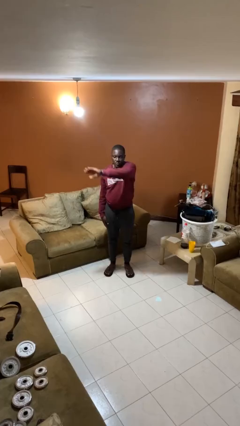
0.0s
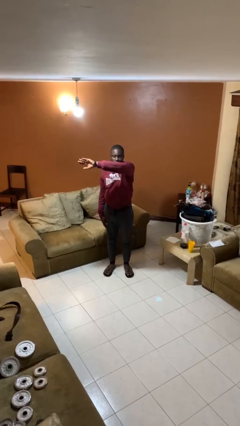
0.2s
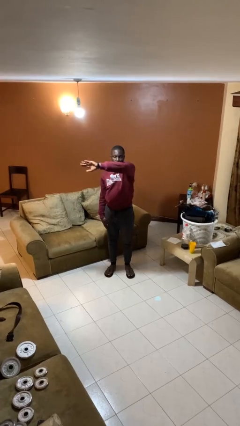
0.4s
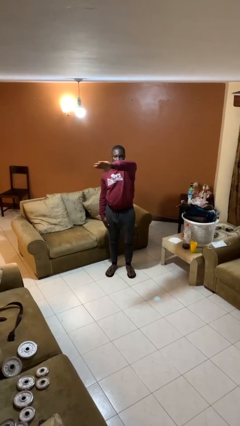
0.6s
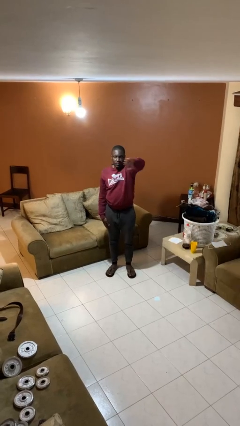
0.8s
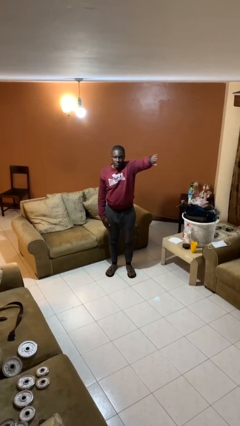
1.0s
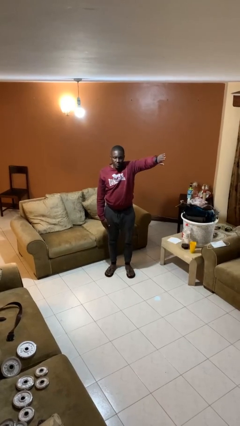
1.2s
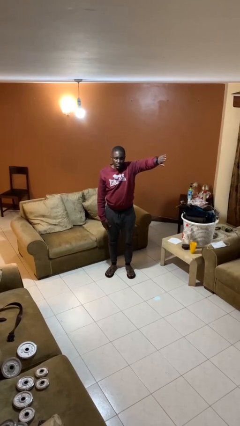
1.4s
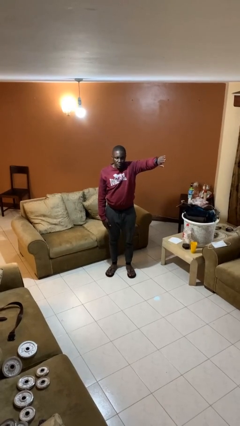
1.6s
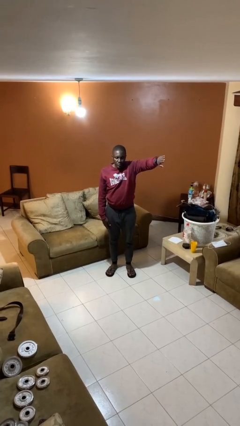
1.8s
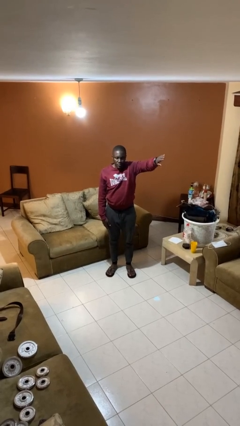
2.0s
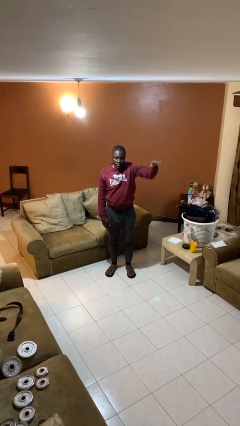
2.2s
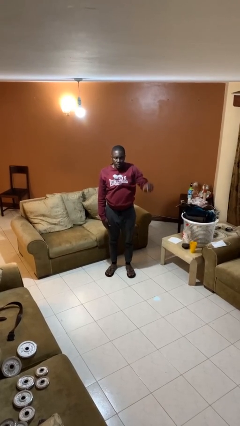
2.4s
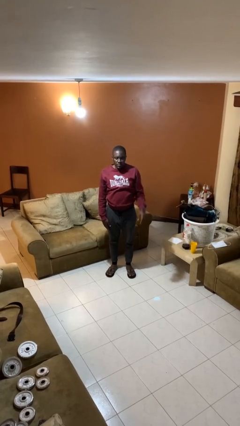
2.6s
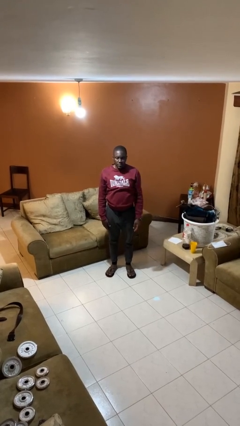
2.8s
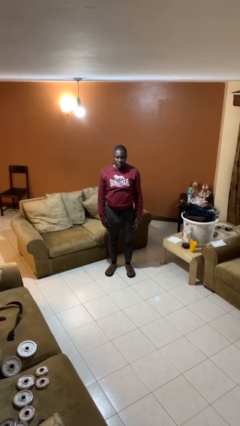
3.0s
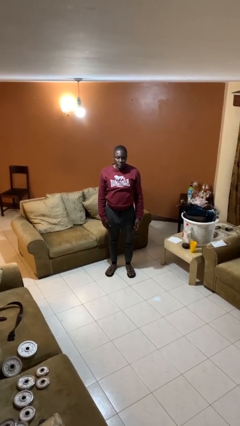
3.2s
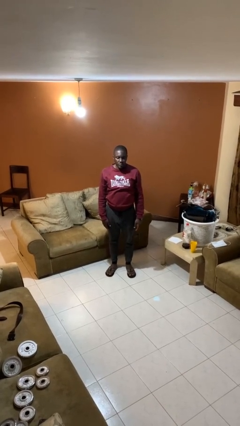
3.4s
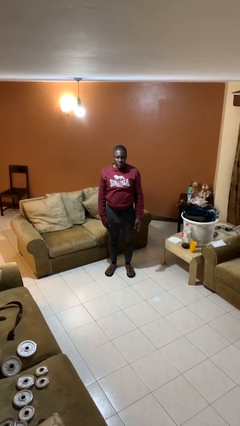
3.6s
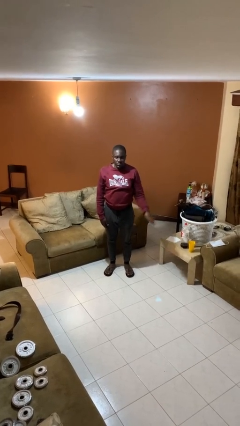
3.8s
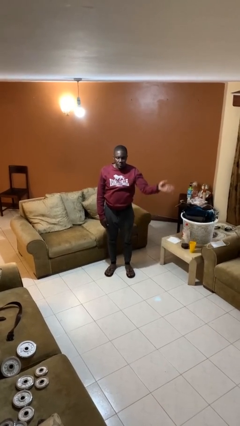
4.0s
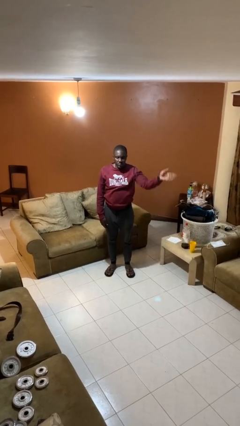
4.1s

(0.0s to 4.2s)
person gestures swipe left

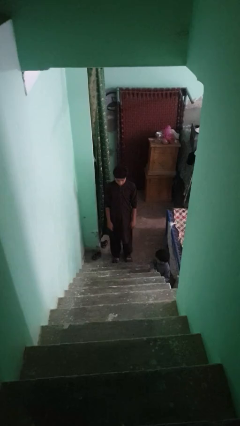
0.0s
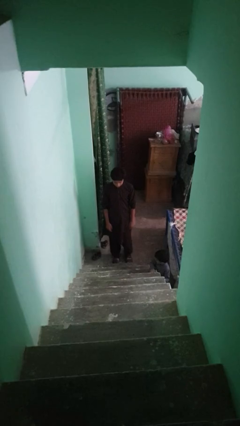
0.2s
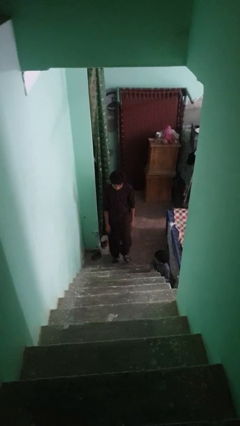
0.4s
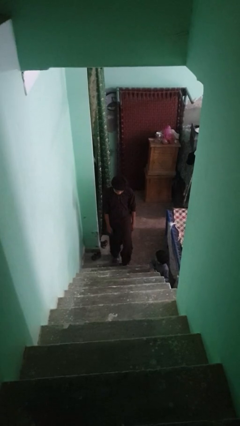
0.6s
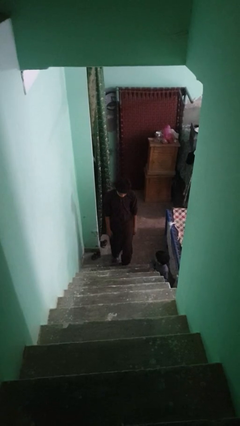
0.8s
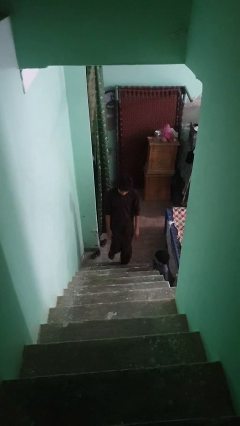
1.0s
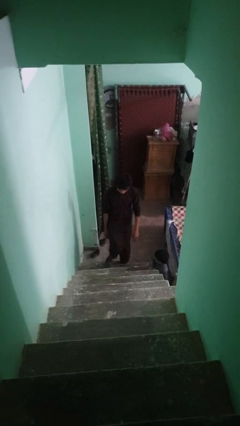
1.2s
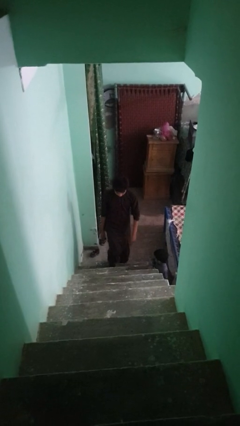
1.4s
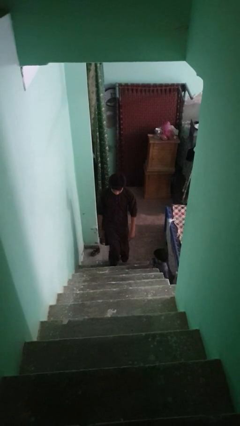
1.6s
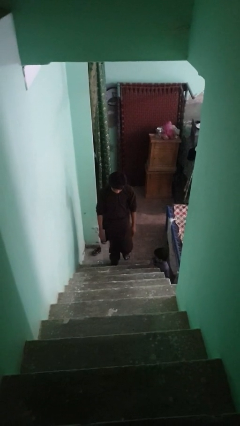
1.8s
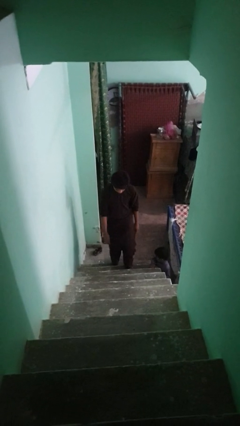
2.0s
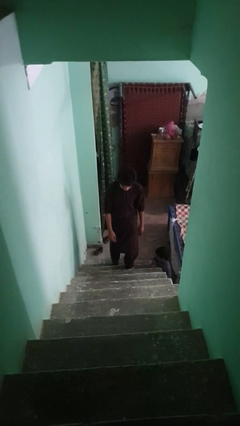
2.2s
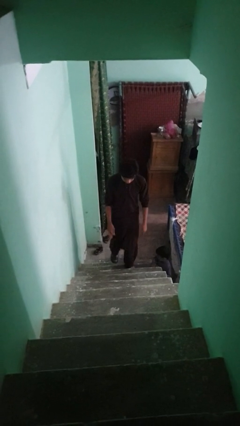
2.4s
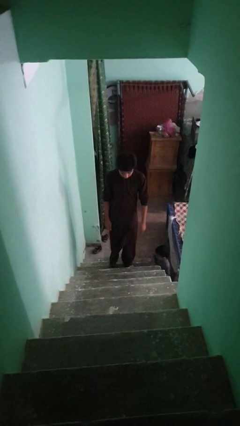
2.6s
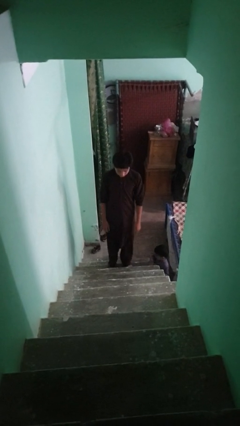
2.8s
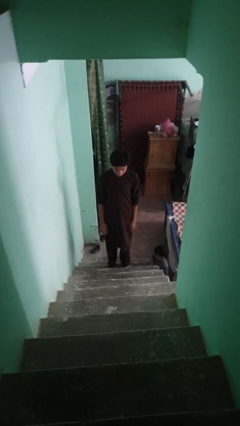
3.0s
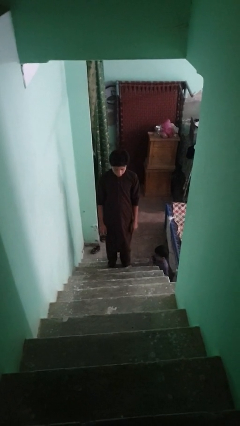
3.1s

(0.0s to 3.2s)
person climbs up stairs

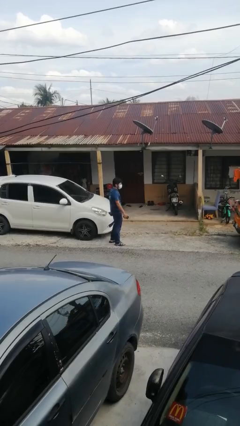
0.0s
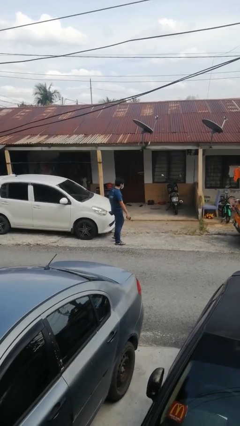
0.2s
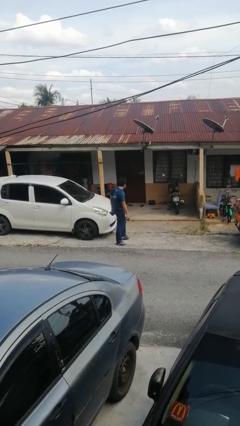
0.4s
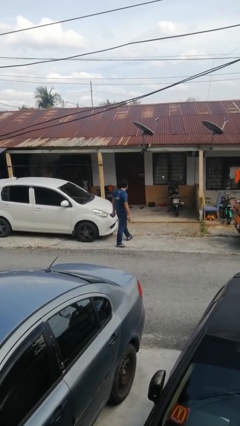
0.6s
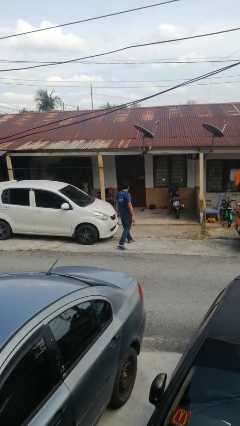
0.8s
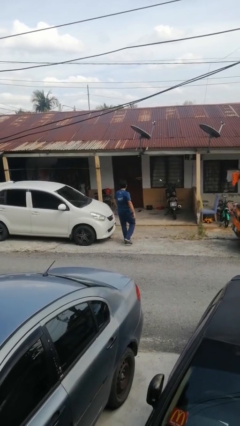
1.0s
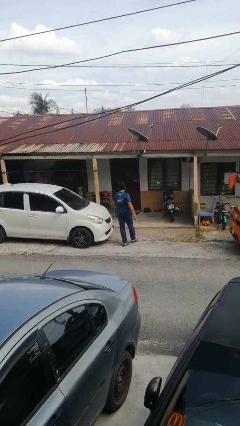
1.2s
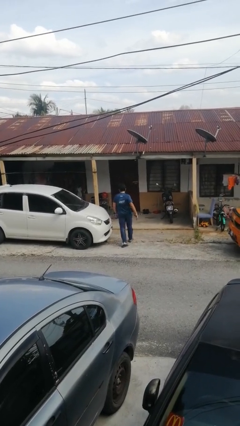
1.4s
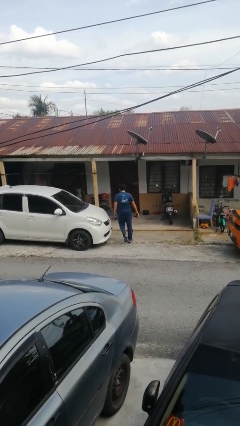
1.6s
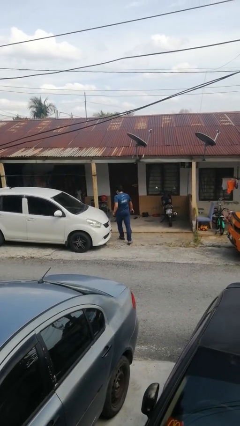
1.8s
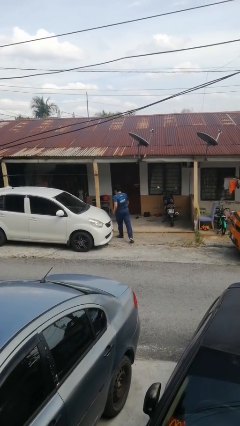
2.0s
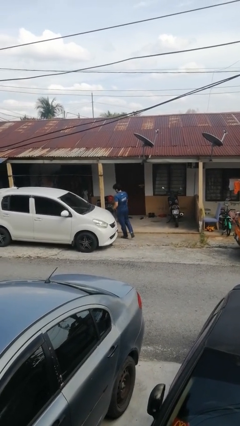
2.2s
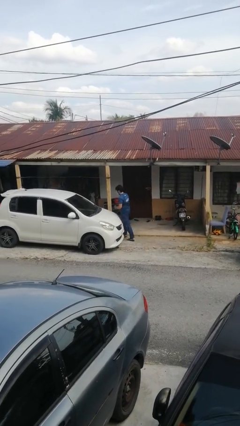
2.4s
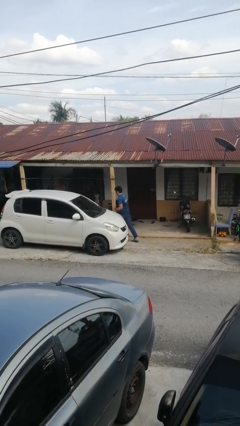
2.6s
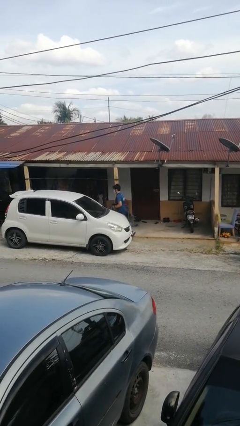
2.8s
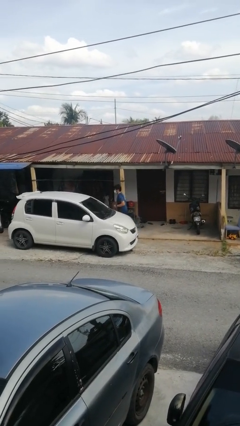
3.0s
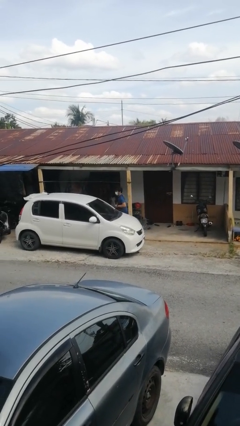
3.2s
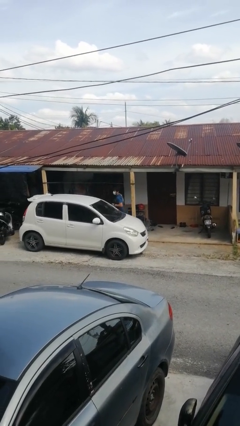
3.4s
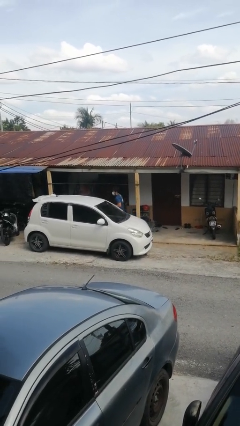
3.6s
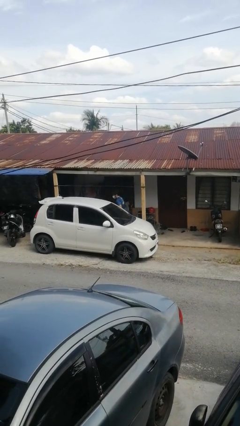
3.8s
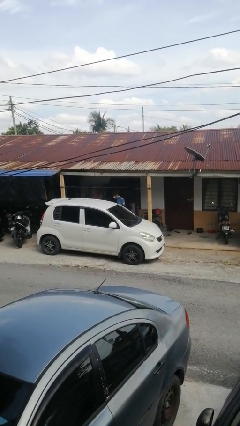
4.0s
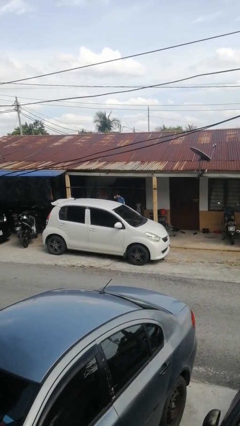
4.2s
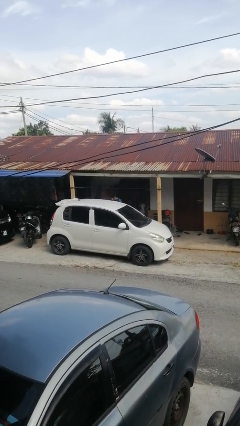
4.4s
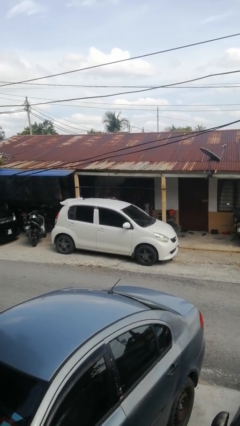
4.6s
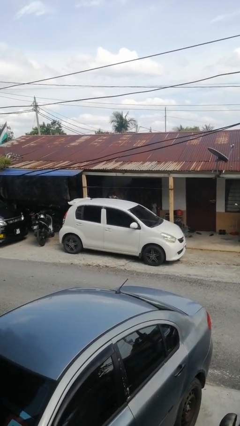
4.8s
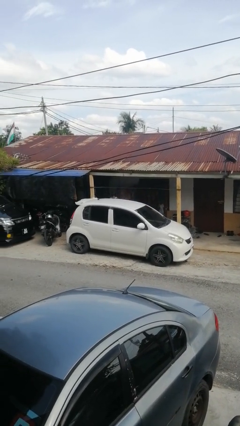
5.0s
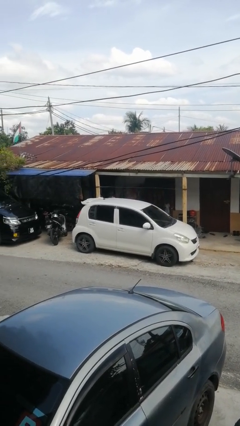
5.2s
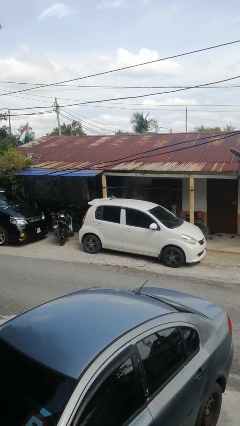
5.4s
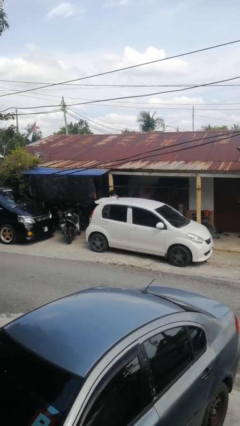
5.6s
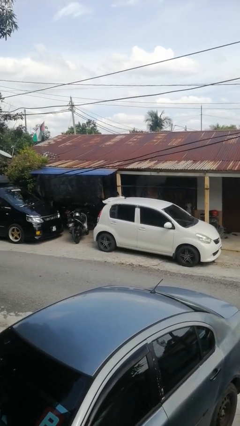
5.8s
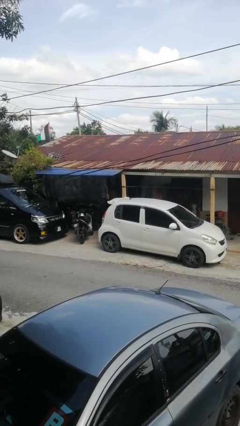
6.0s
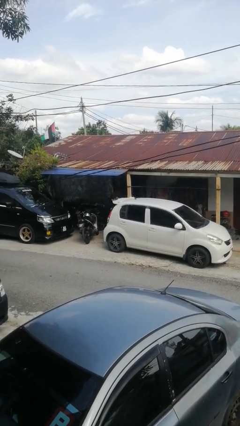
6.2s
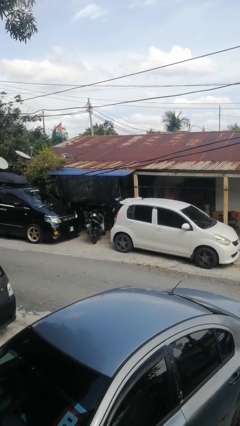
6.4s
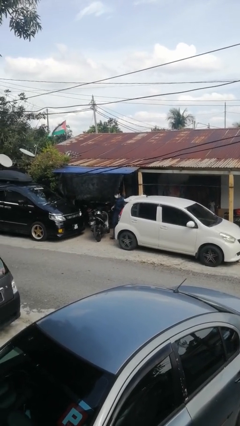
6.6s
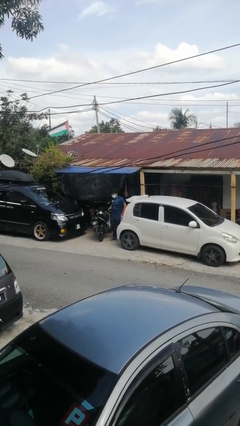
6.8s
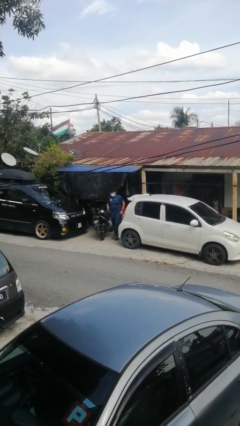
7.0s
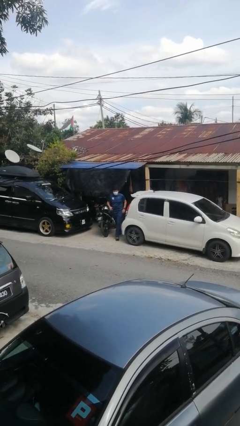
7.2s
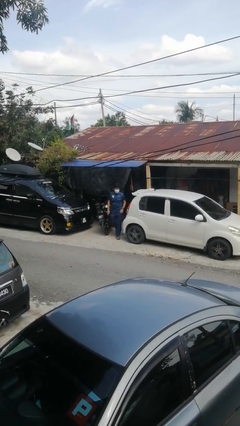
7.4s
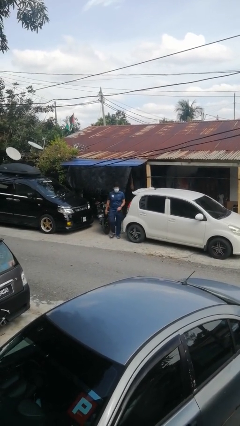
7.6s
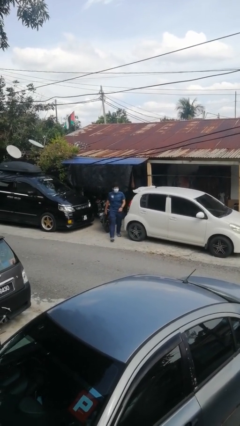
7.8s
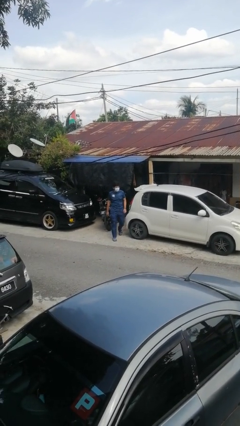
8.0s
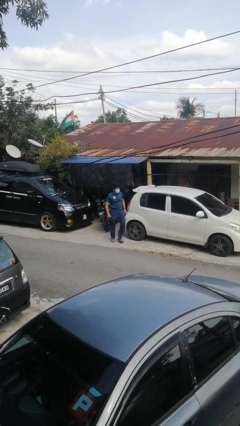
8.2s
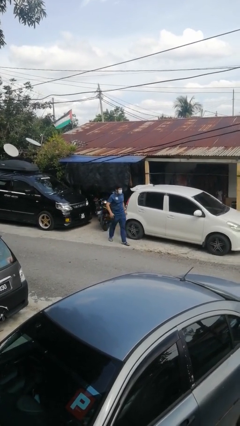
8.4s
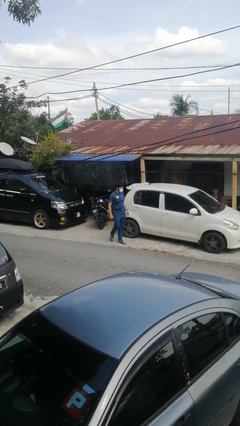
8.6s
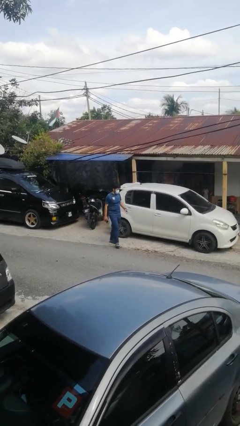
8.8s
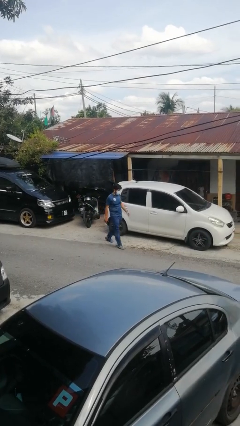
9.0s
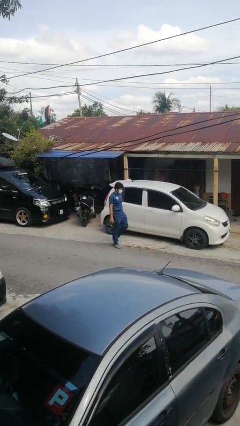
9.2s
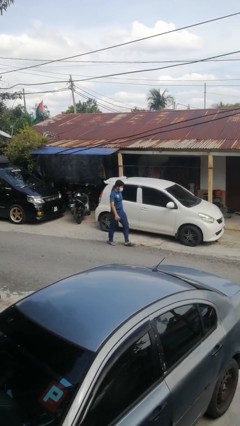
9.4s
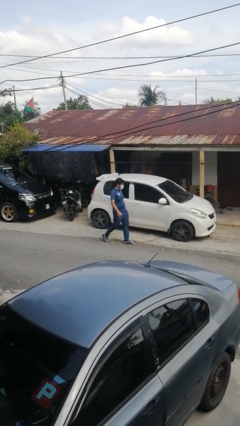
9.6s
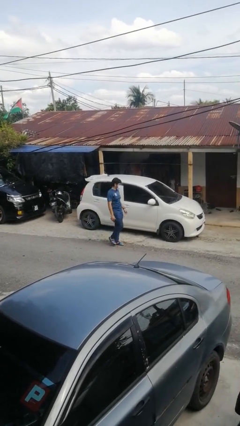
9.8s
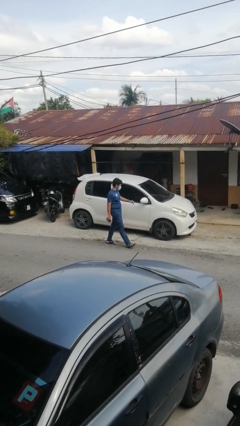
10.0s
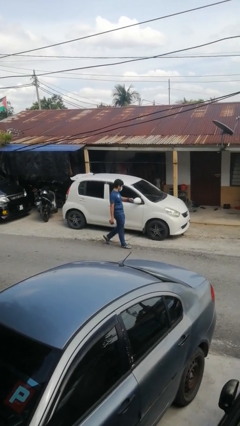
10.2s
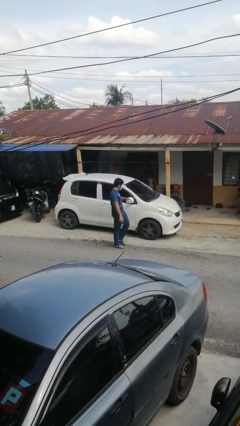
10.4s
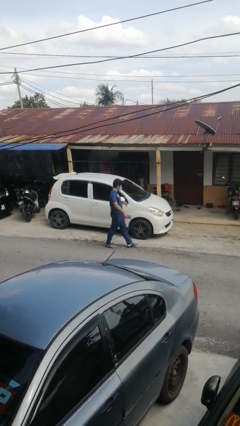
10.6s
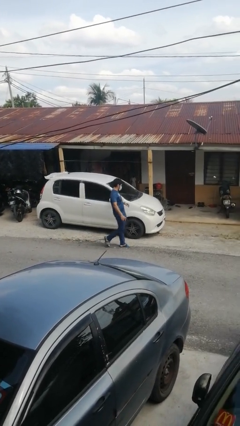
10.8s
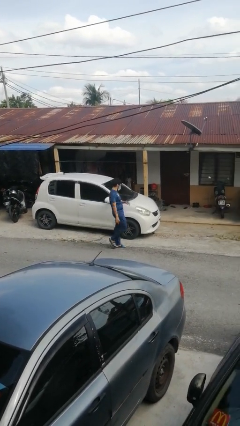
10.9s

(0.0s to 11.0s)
person walks around car
